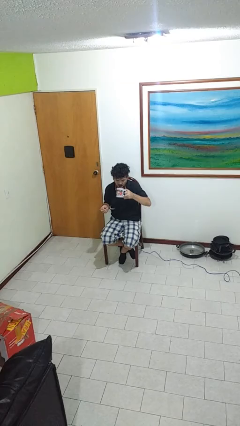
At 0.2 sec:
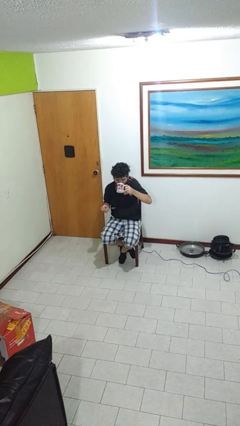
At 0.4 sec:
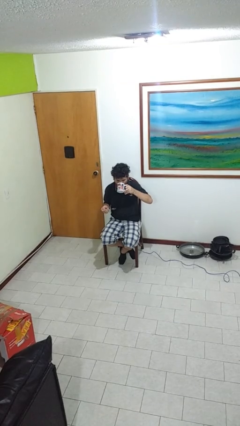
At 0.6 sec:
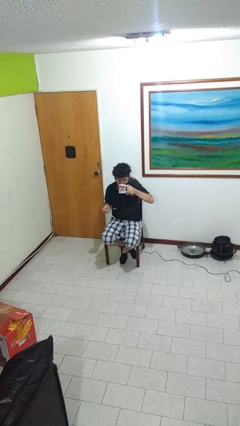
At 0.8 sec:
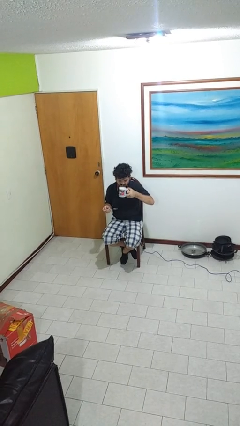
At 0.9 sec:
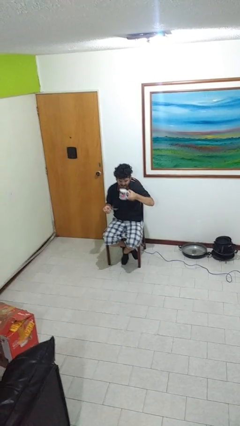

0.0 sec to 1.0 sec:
person drinks from mug

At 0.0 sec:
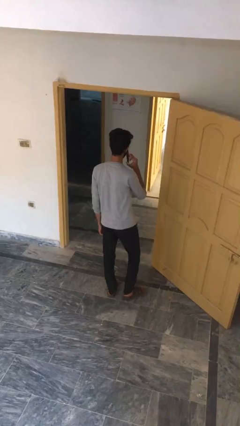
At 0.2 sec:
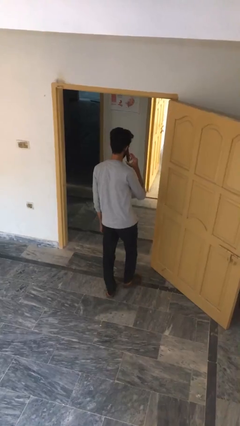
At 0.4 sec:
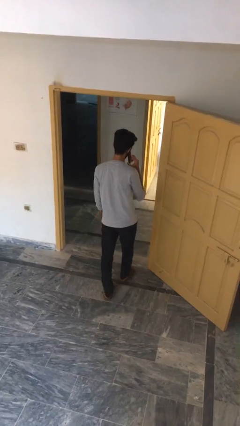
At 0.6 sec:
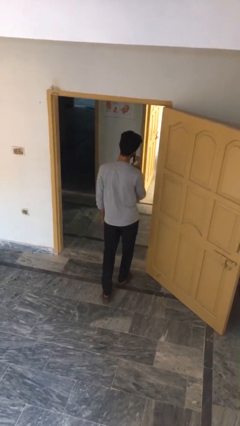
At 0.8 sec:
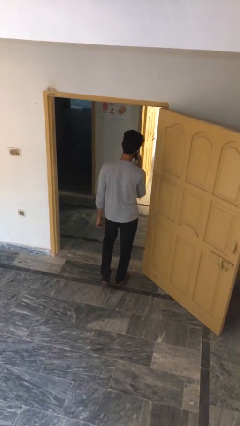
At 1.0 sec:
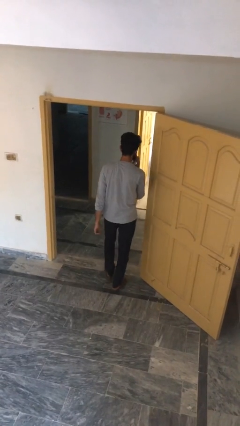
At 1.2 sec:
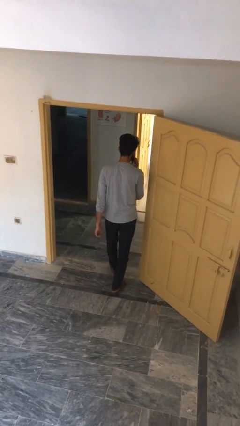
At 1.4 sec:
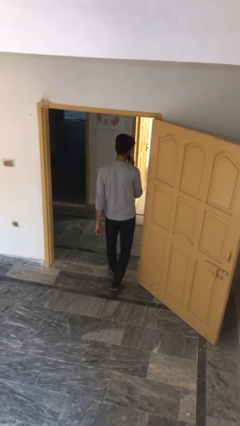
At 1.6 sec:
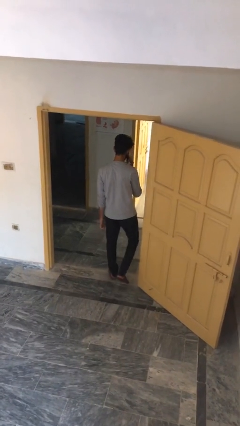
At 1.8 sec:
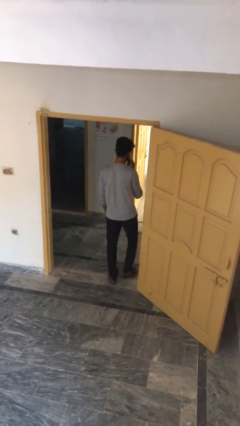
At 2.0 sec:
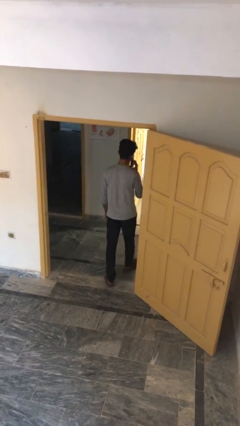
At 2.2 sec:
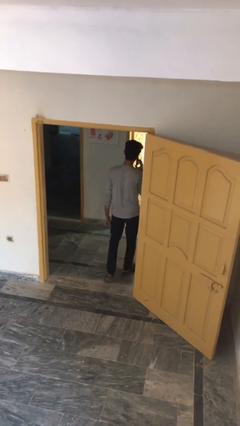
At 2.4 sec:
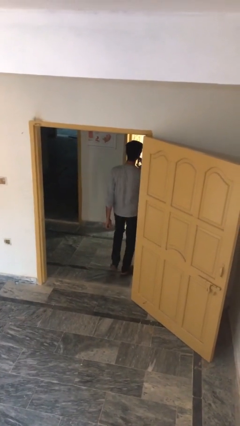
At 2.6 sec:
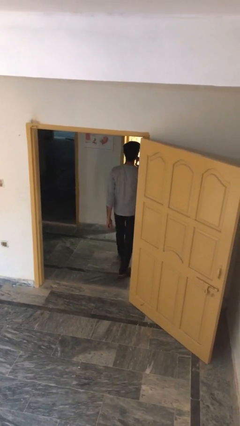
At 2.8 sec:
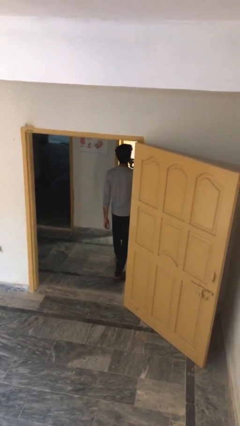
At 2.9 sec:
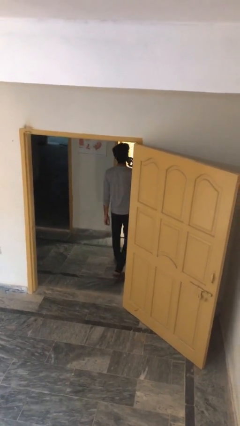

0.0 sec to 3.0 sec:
person exits scene through structure

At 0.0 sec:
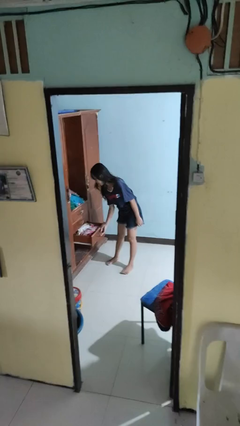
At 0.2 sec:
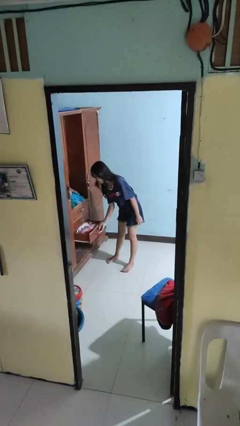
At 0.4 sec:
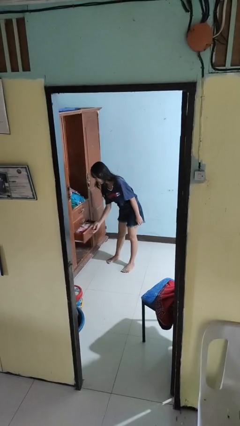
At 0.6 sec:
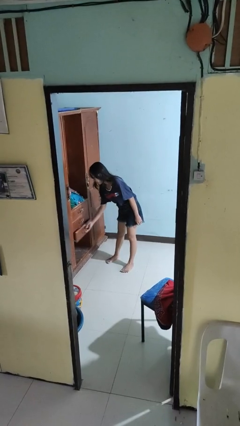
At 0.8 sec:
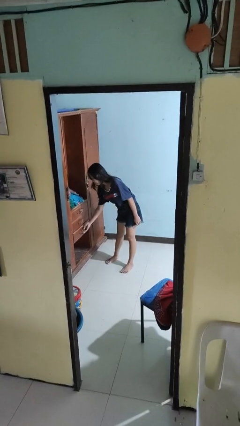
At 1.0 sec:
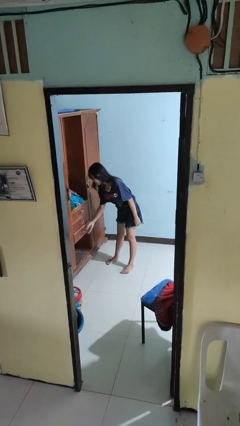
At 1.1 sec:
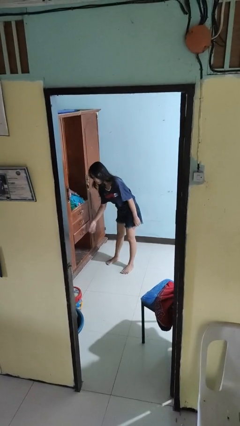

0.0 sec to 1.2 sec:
person closes dresser drawer

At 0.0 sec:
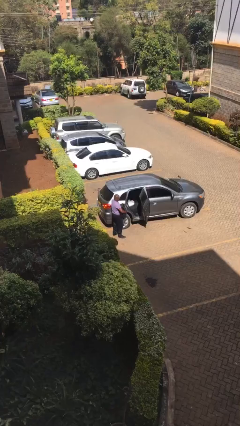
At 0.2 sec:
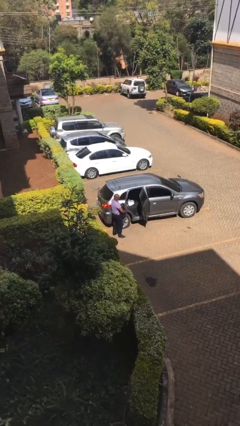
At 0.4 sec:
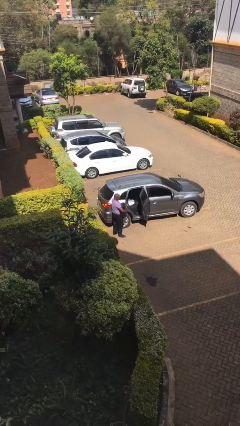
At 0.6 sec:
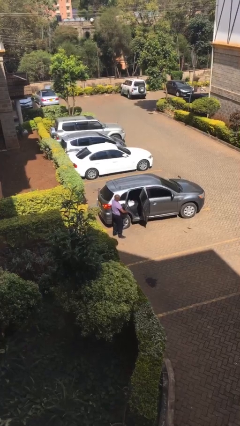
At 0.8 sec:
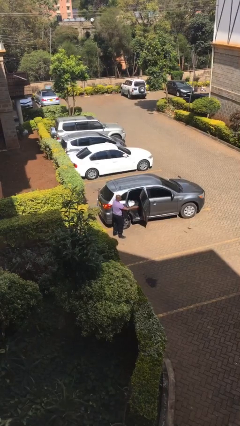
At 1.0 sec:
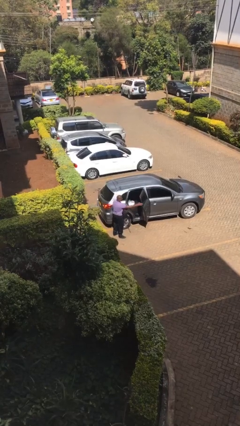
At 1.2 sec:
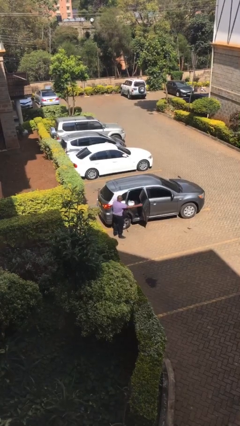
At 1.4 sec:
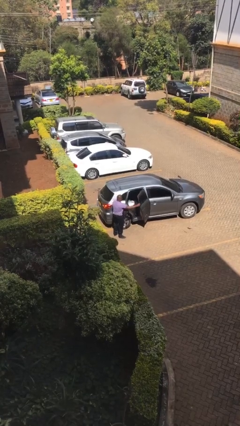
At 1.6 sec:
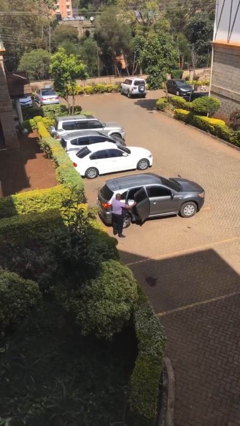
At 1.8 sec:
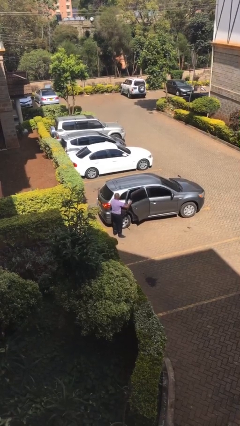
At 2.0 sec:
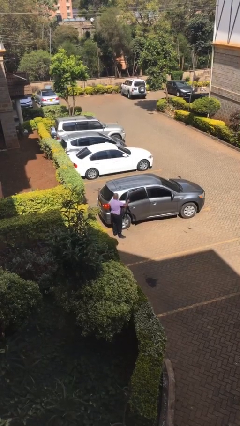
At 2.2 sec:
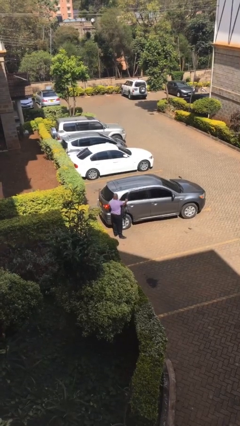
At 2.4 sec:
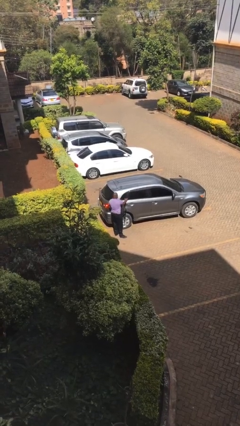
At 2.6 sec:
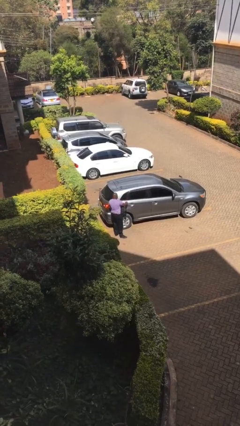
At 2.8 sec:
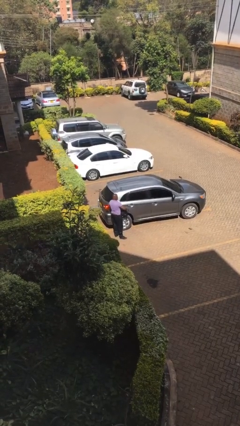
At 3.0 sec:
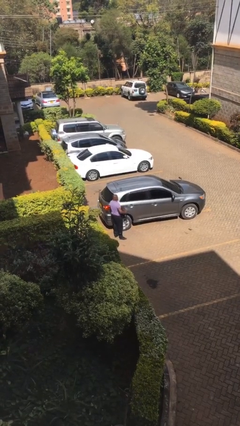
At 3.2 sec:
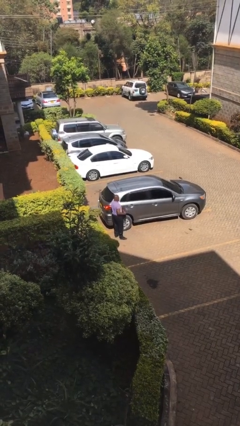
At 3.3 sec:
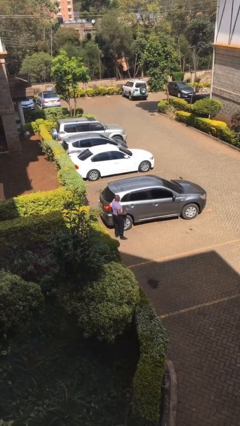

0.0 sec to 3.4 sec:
person closes car door

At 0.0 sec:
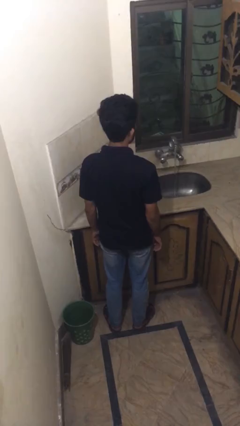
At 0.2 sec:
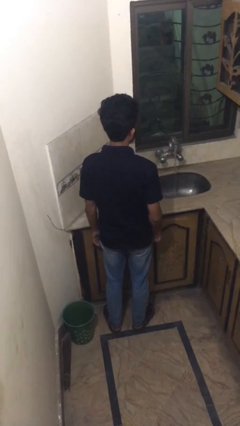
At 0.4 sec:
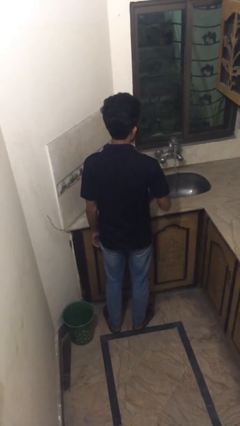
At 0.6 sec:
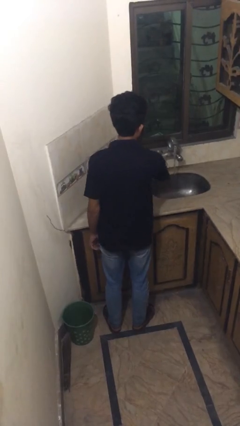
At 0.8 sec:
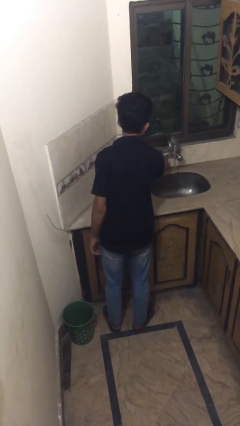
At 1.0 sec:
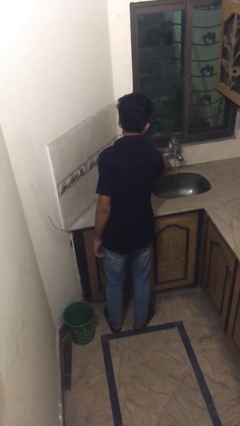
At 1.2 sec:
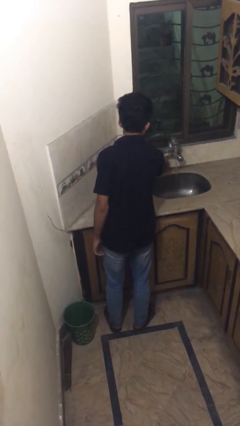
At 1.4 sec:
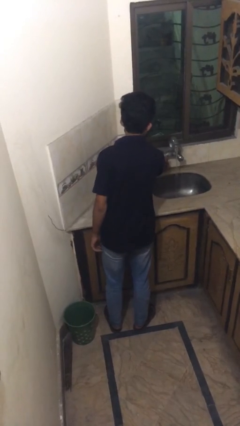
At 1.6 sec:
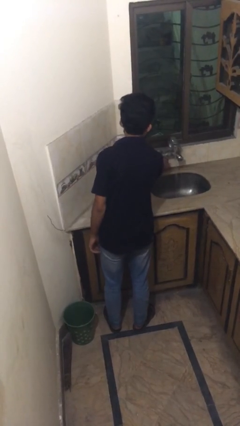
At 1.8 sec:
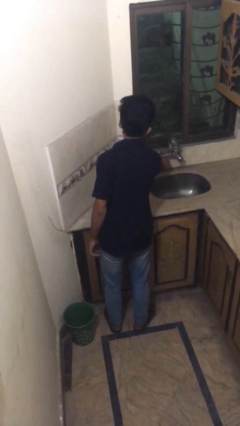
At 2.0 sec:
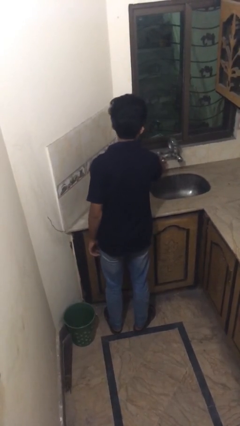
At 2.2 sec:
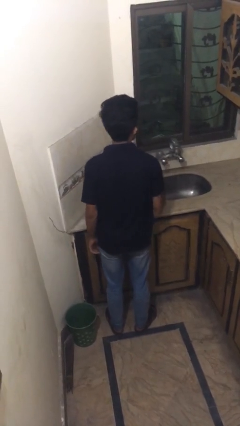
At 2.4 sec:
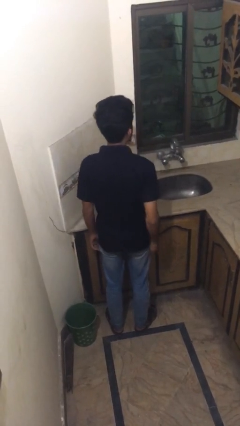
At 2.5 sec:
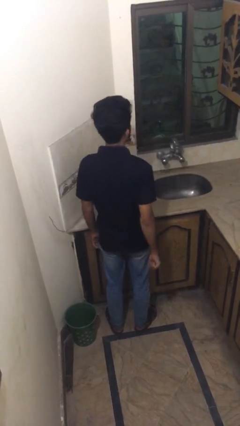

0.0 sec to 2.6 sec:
person turns off faucet

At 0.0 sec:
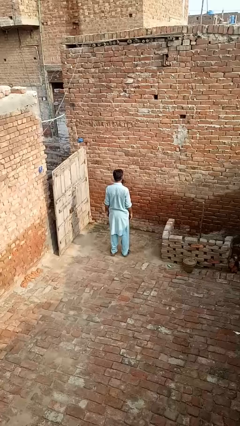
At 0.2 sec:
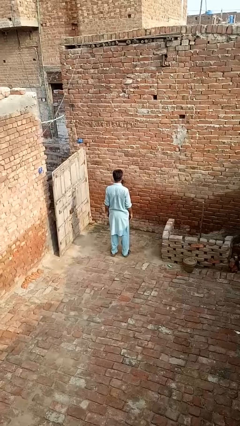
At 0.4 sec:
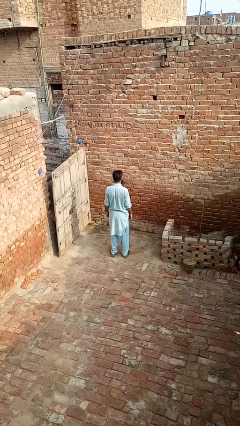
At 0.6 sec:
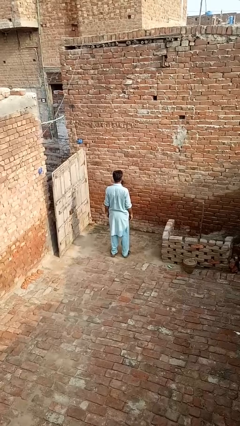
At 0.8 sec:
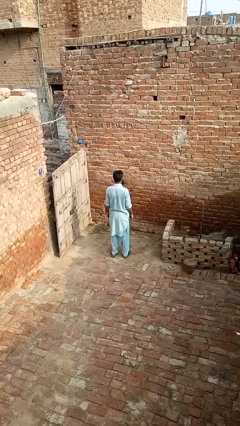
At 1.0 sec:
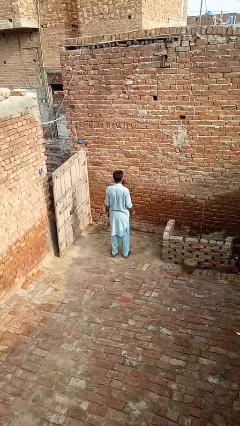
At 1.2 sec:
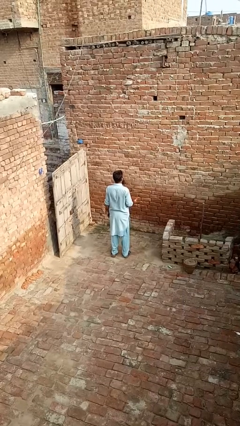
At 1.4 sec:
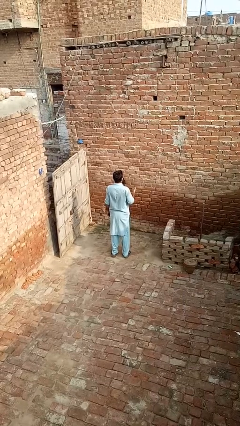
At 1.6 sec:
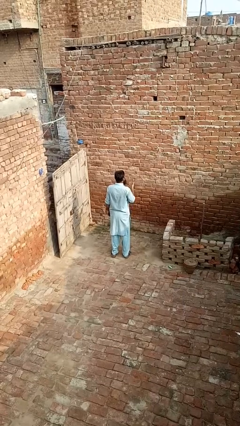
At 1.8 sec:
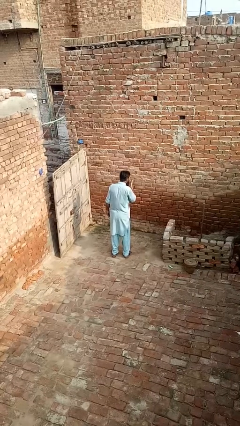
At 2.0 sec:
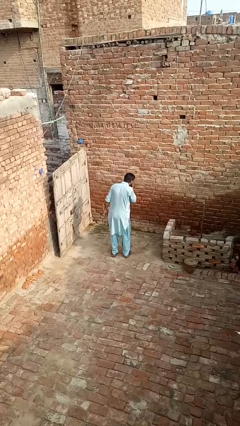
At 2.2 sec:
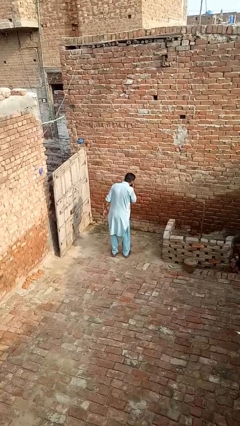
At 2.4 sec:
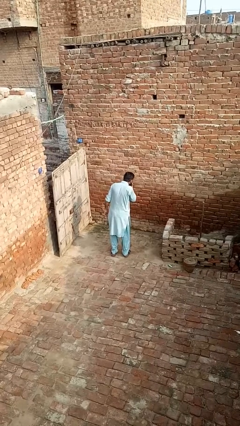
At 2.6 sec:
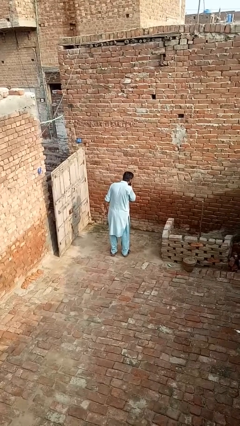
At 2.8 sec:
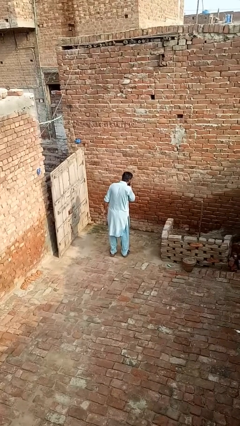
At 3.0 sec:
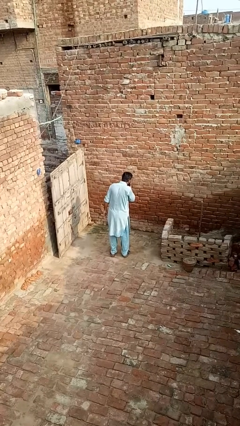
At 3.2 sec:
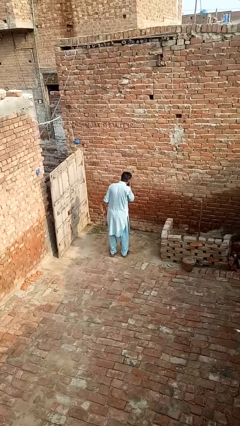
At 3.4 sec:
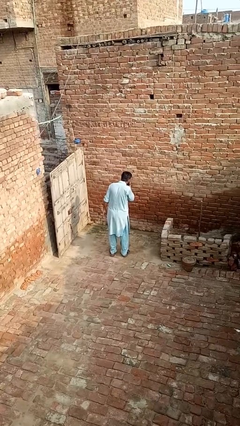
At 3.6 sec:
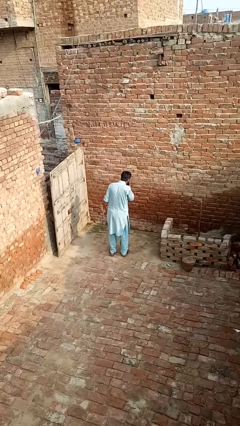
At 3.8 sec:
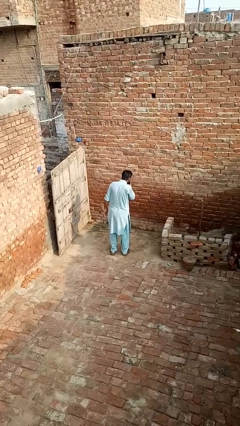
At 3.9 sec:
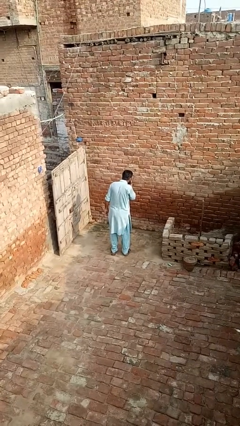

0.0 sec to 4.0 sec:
person sneezes into hand

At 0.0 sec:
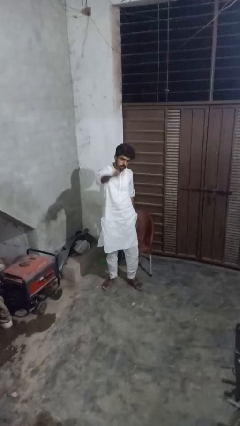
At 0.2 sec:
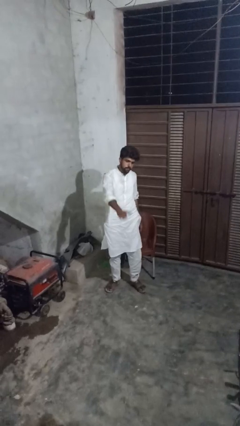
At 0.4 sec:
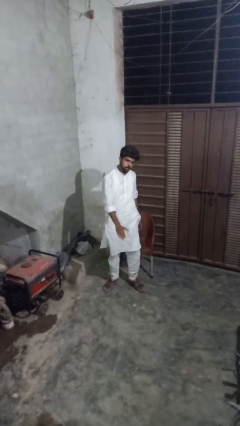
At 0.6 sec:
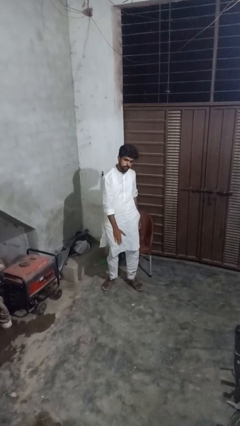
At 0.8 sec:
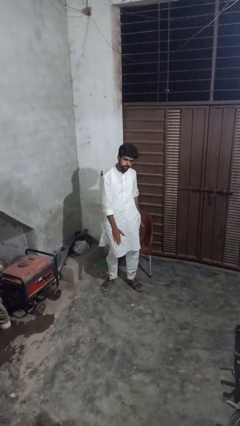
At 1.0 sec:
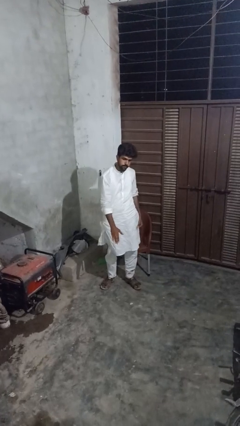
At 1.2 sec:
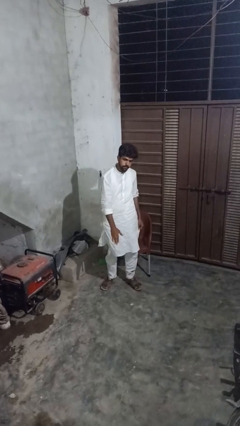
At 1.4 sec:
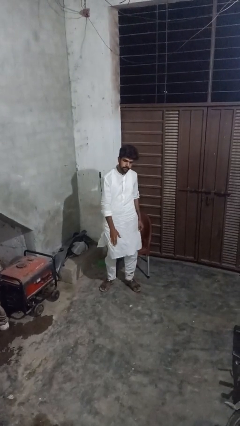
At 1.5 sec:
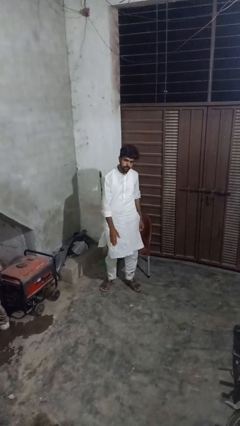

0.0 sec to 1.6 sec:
person gestures swipe down
